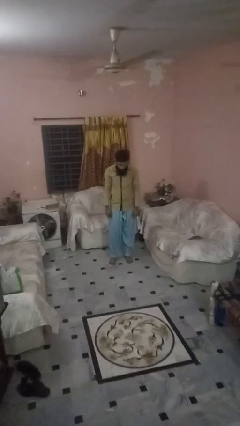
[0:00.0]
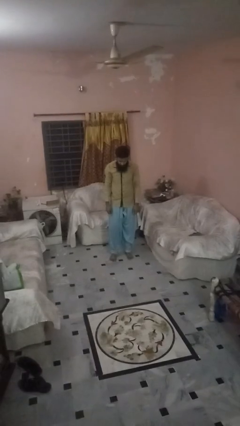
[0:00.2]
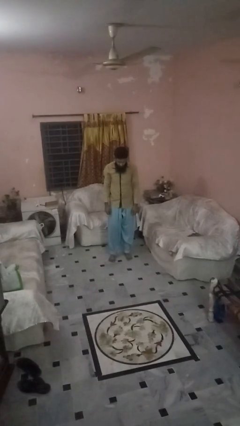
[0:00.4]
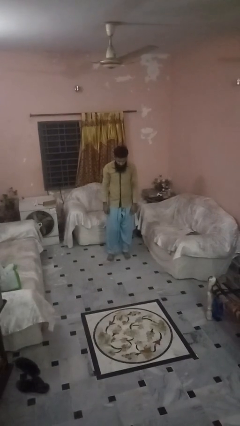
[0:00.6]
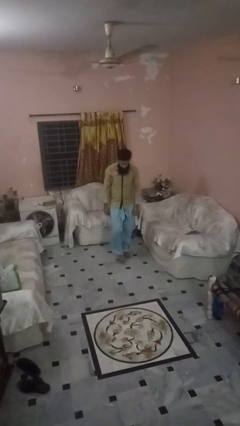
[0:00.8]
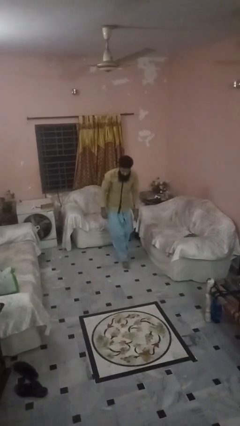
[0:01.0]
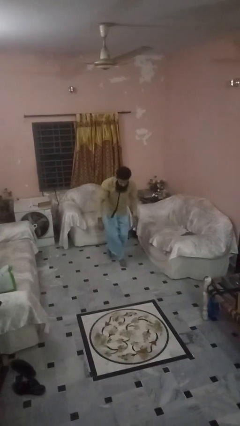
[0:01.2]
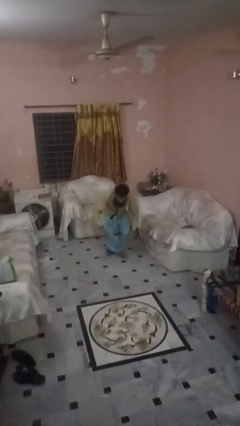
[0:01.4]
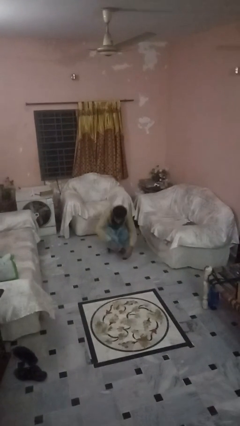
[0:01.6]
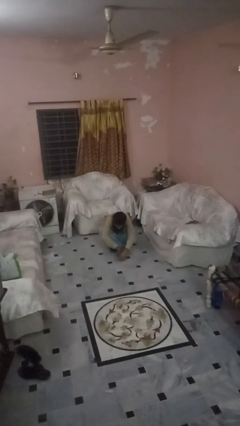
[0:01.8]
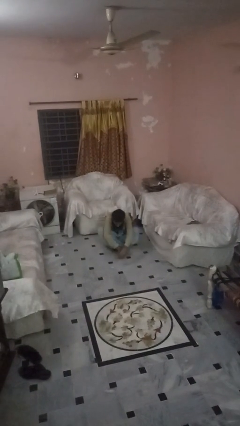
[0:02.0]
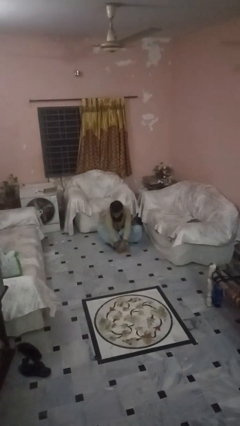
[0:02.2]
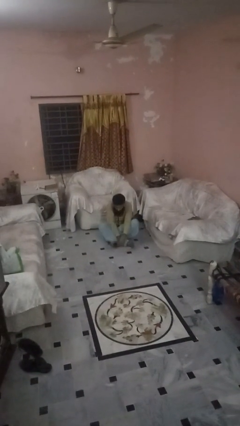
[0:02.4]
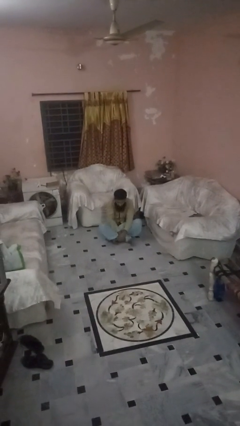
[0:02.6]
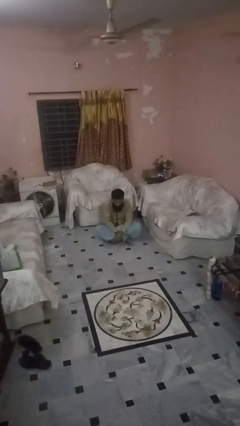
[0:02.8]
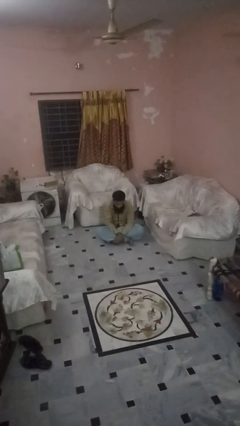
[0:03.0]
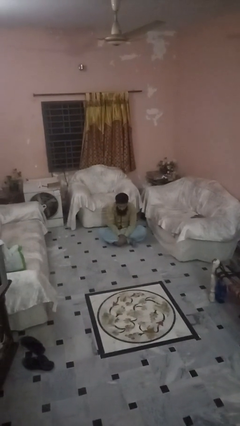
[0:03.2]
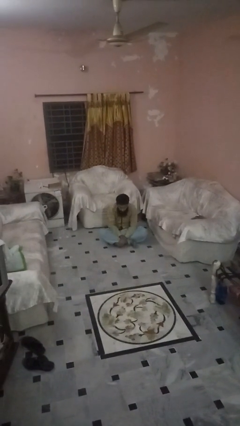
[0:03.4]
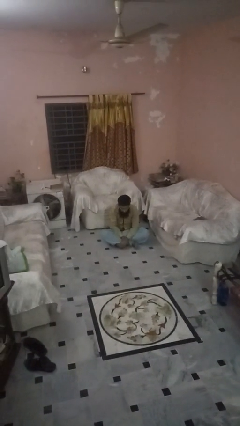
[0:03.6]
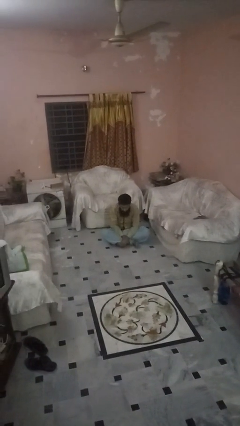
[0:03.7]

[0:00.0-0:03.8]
person sits crisscross

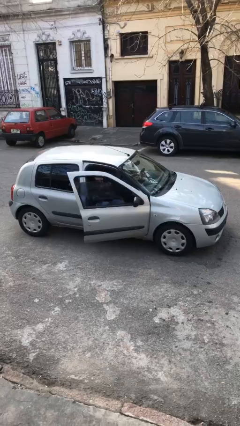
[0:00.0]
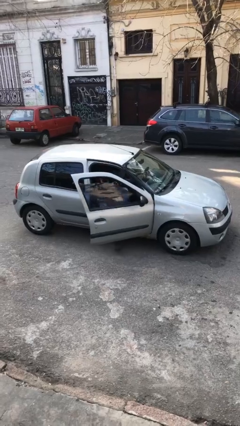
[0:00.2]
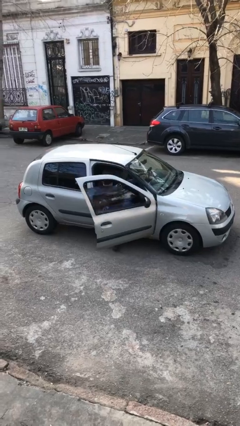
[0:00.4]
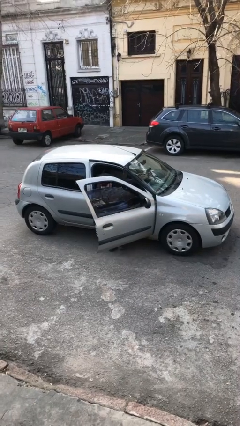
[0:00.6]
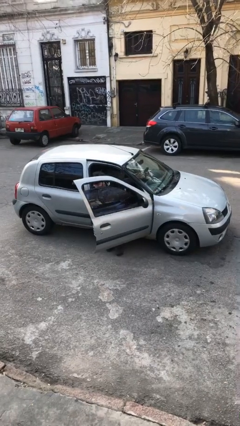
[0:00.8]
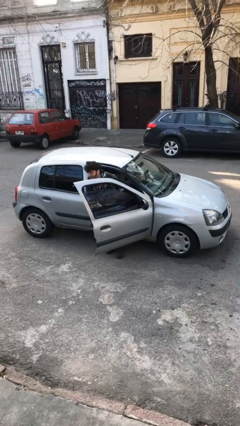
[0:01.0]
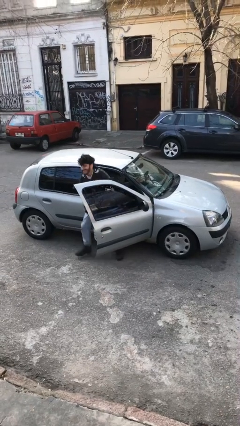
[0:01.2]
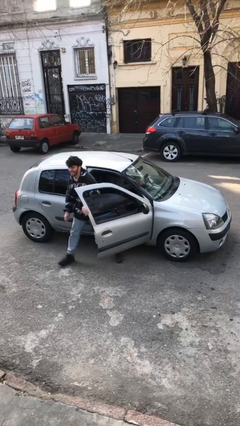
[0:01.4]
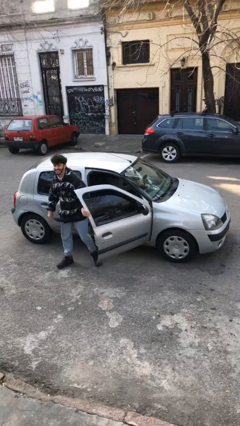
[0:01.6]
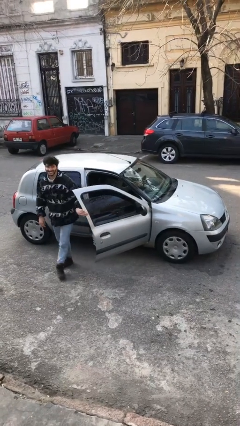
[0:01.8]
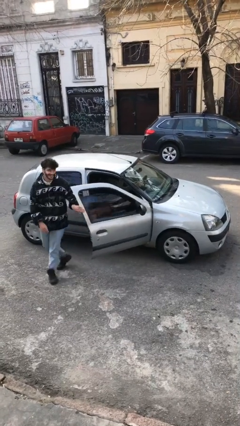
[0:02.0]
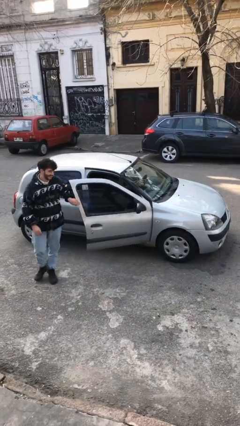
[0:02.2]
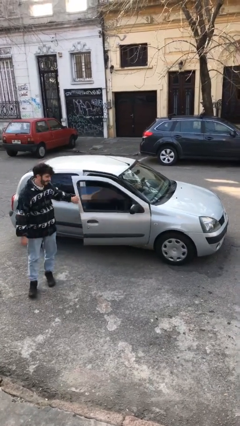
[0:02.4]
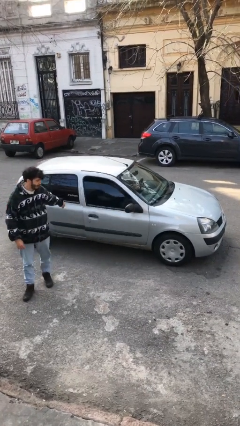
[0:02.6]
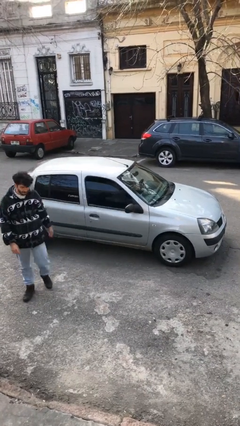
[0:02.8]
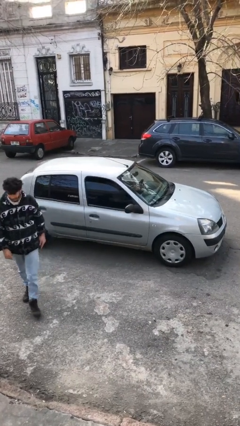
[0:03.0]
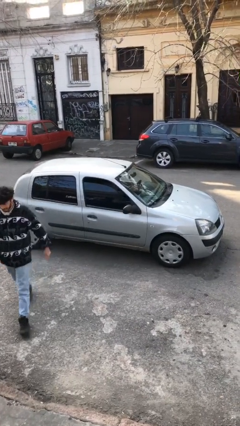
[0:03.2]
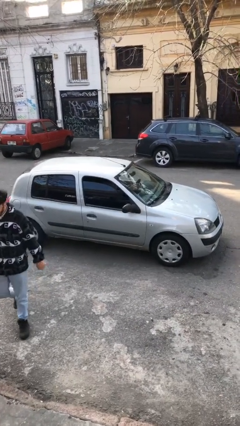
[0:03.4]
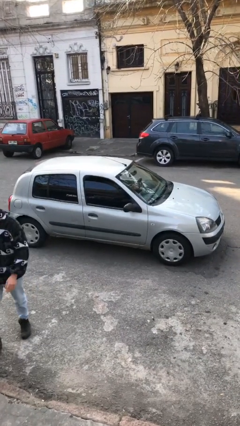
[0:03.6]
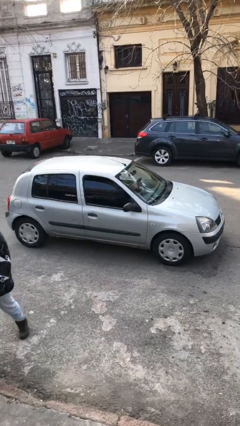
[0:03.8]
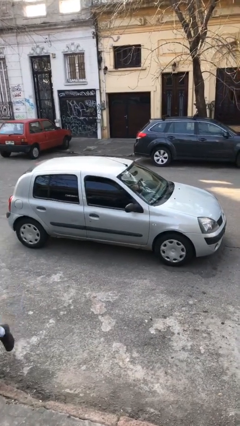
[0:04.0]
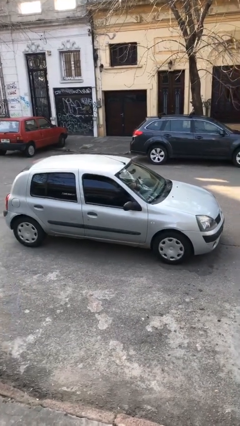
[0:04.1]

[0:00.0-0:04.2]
car drops off person

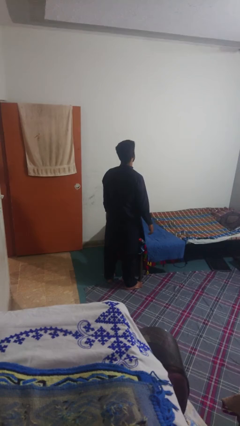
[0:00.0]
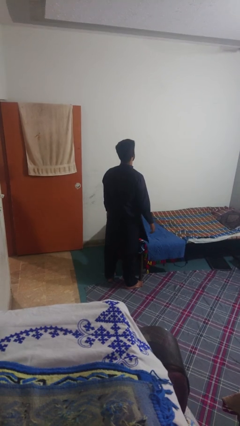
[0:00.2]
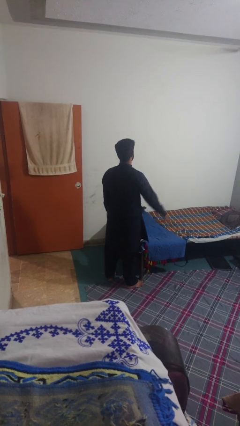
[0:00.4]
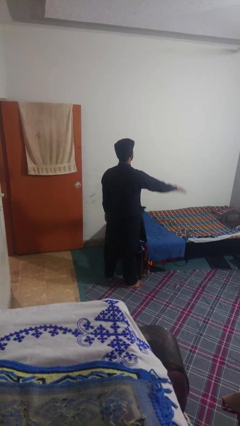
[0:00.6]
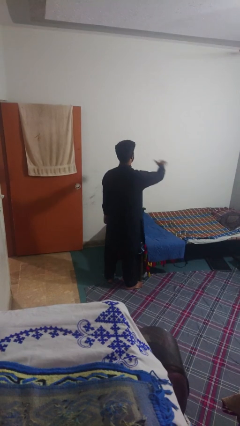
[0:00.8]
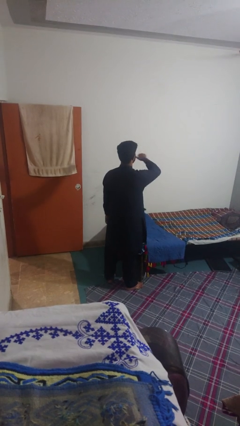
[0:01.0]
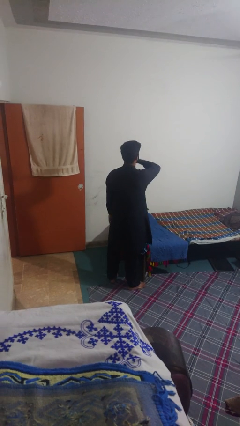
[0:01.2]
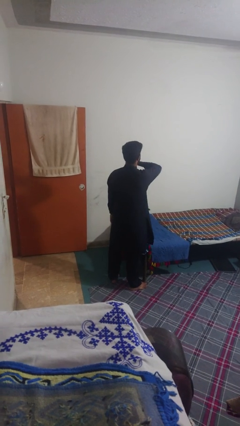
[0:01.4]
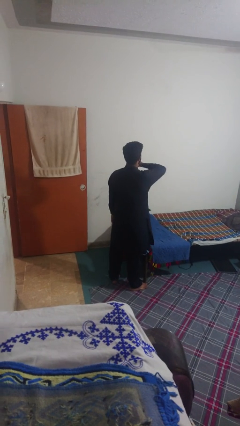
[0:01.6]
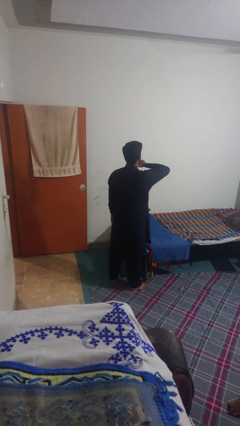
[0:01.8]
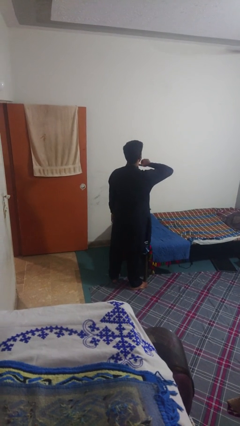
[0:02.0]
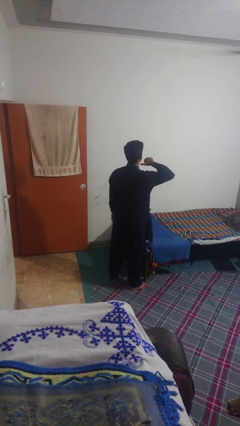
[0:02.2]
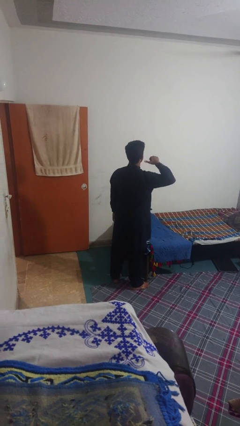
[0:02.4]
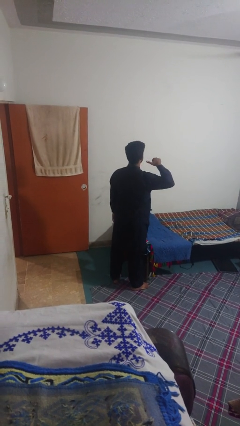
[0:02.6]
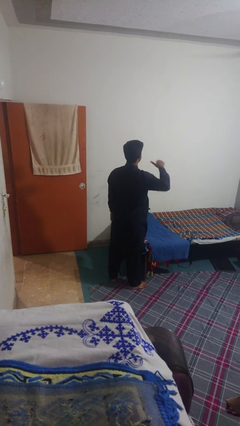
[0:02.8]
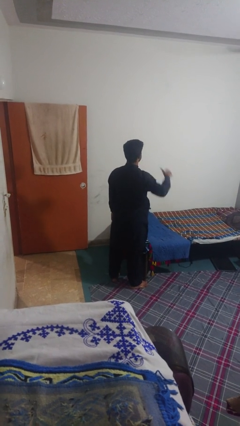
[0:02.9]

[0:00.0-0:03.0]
person gestures cut

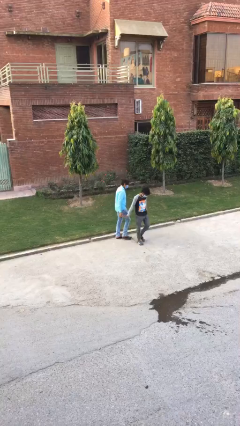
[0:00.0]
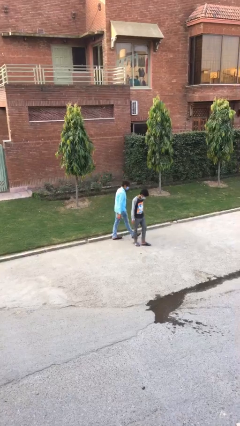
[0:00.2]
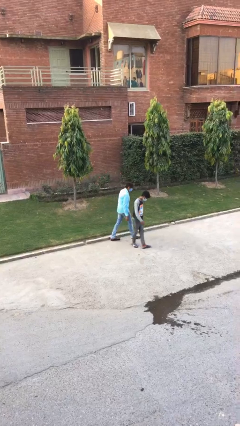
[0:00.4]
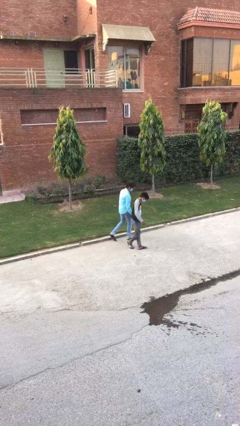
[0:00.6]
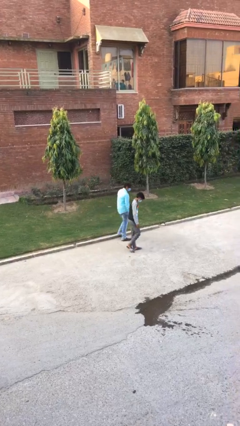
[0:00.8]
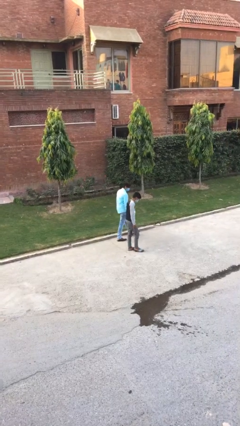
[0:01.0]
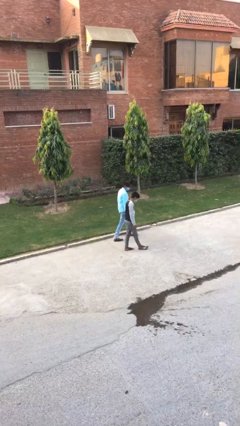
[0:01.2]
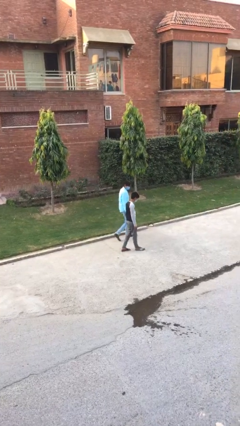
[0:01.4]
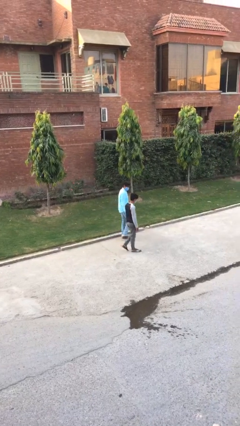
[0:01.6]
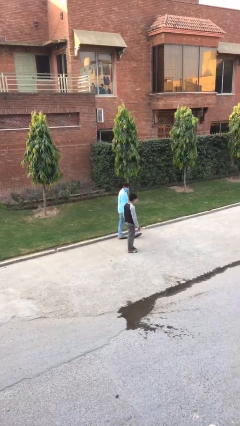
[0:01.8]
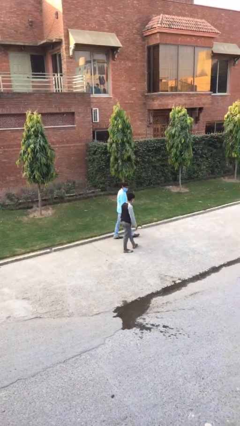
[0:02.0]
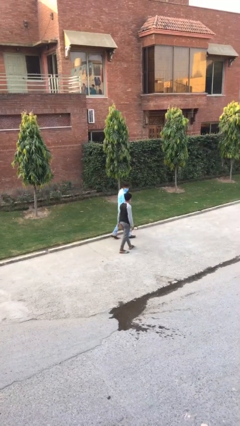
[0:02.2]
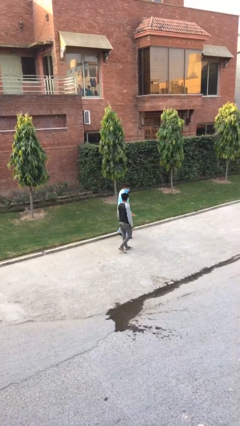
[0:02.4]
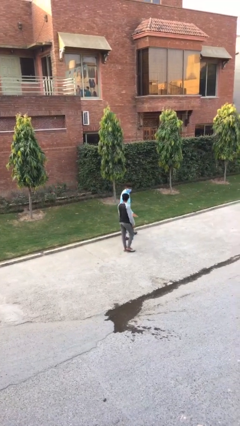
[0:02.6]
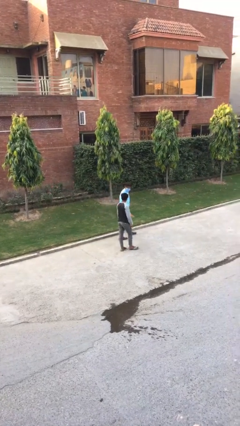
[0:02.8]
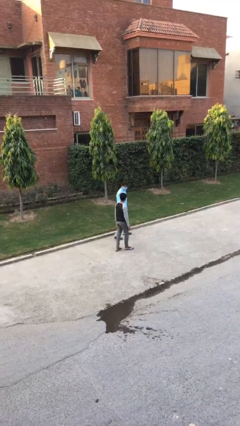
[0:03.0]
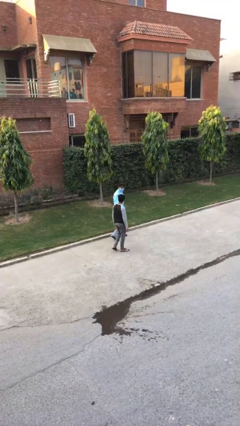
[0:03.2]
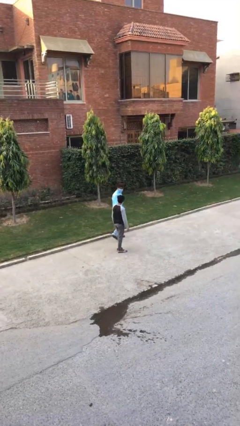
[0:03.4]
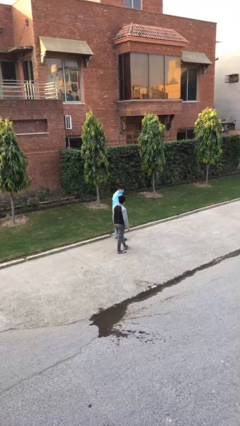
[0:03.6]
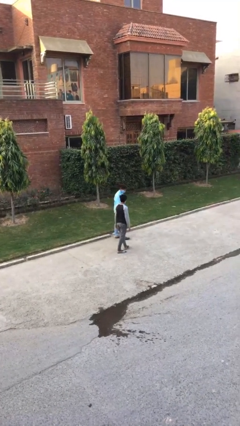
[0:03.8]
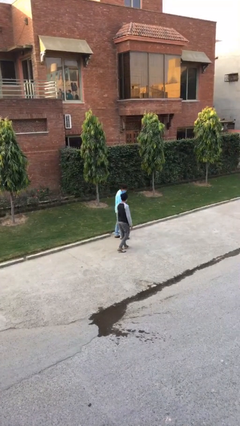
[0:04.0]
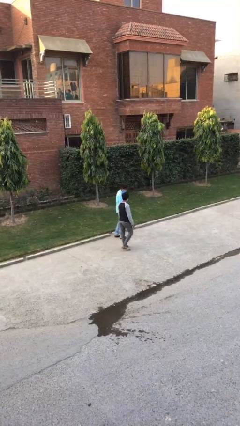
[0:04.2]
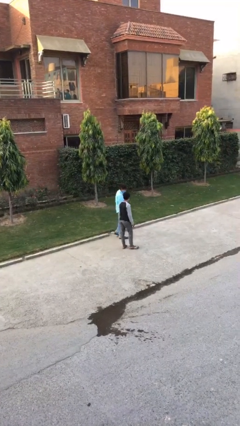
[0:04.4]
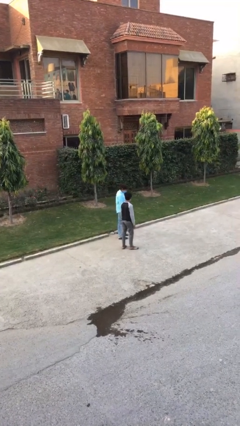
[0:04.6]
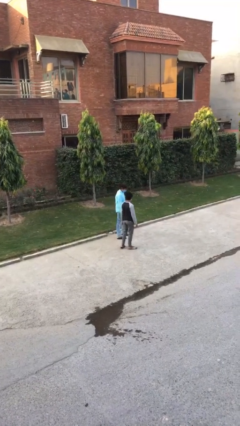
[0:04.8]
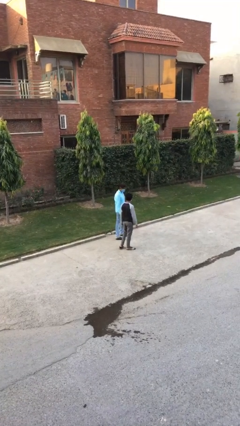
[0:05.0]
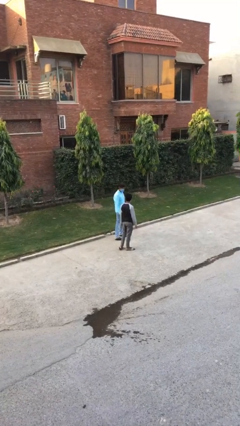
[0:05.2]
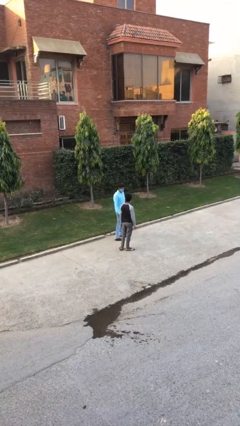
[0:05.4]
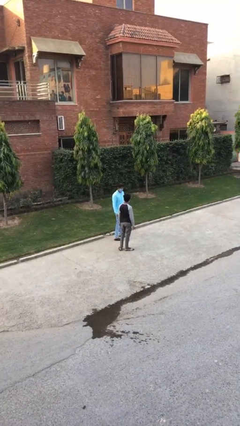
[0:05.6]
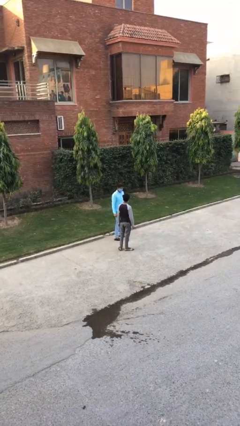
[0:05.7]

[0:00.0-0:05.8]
person talks to person

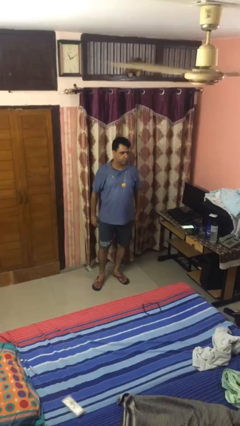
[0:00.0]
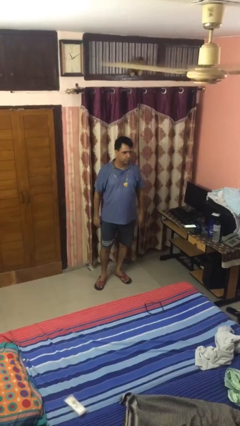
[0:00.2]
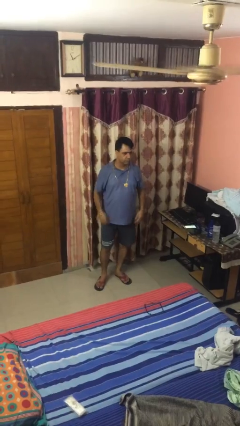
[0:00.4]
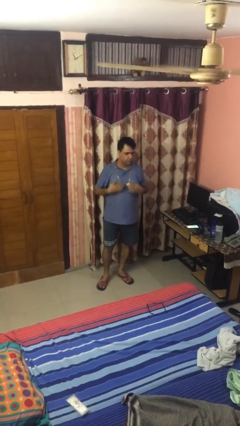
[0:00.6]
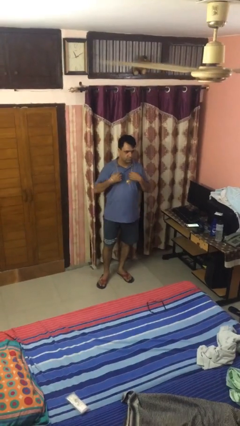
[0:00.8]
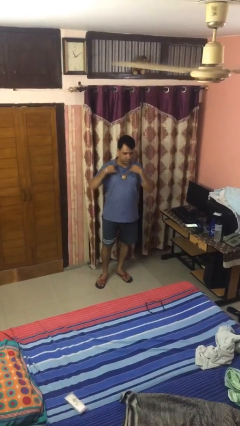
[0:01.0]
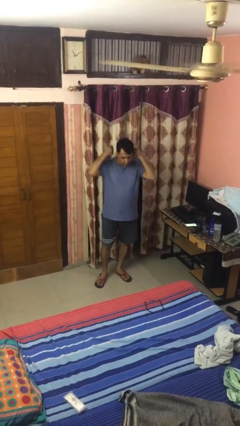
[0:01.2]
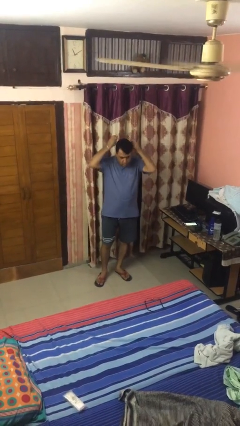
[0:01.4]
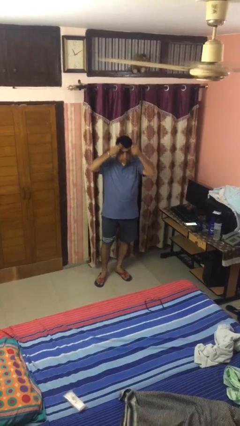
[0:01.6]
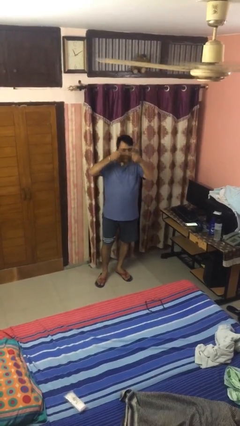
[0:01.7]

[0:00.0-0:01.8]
person takes off necklace
